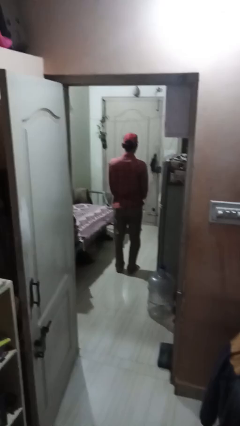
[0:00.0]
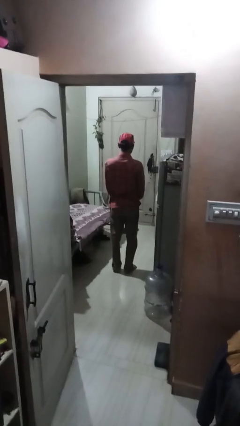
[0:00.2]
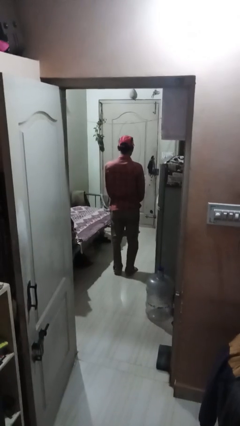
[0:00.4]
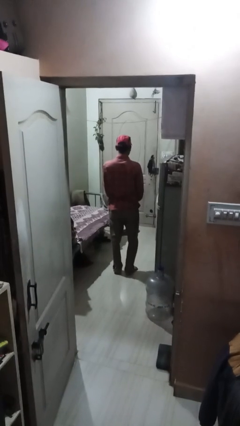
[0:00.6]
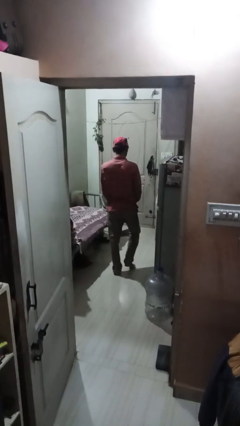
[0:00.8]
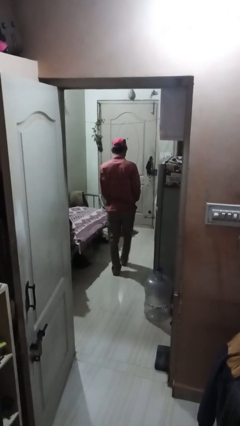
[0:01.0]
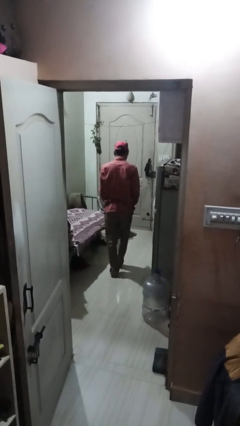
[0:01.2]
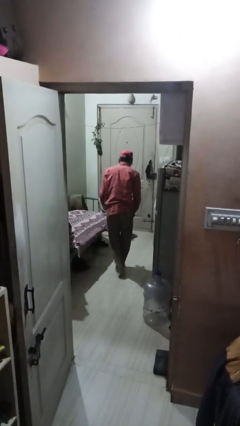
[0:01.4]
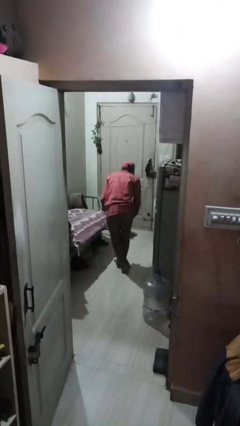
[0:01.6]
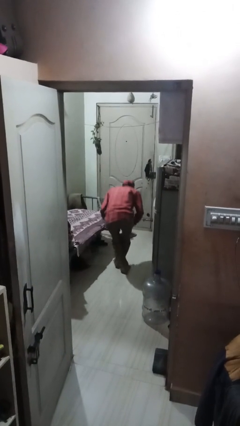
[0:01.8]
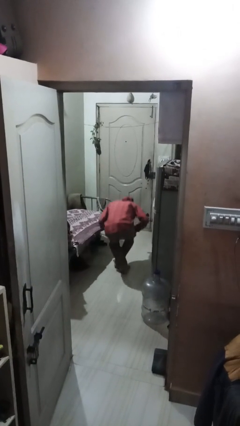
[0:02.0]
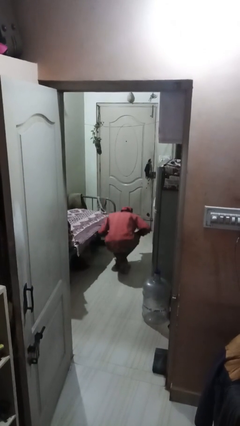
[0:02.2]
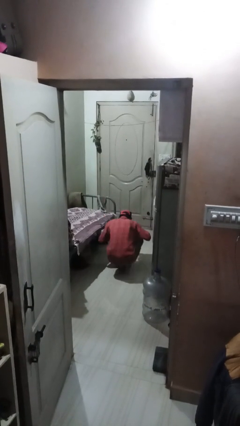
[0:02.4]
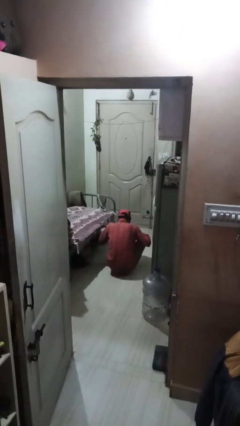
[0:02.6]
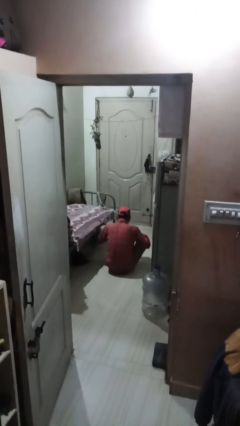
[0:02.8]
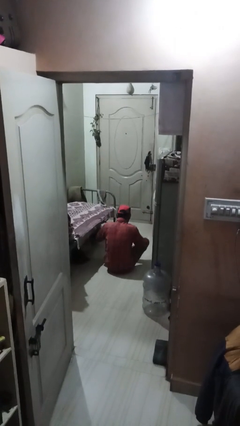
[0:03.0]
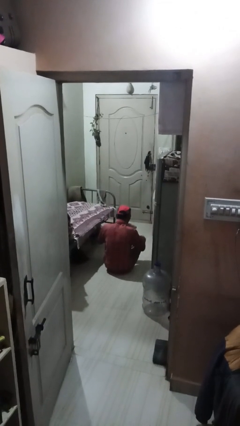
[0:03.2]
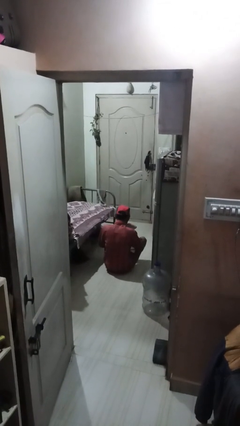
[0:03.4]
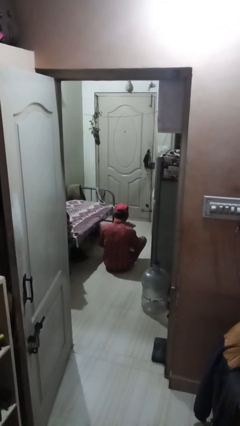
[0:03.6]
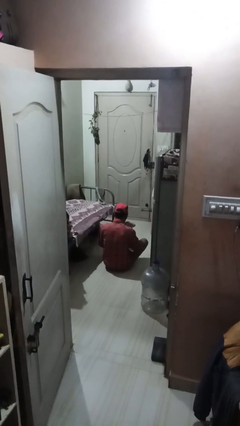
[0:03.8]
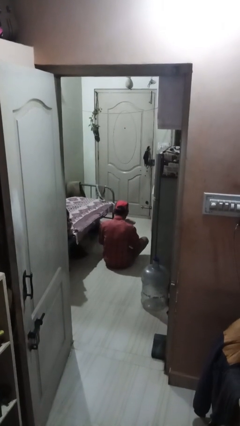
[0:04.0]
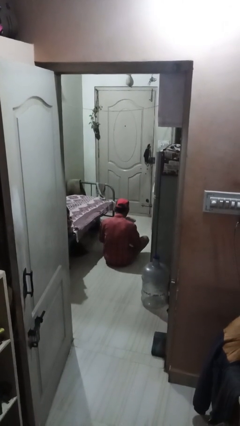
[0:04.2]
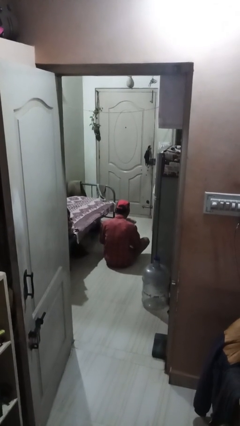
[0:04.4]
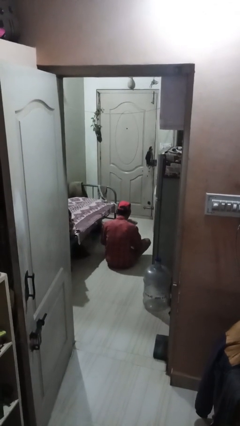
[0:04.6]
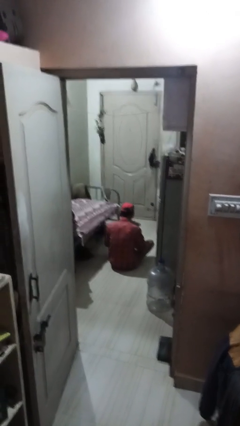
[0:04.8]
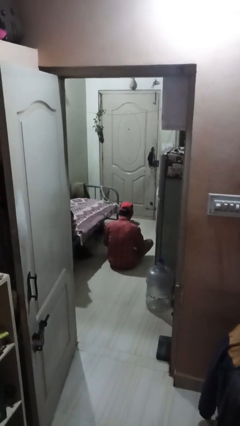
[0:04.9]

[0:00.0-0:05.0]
person sits crisscross

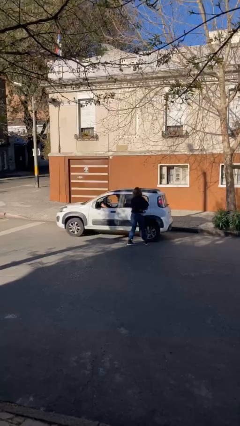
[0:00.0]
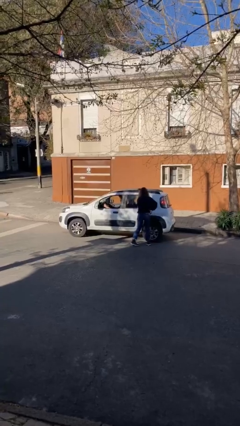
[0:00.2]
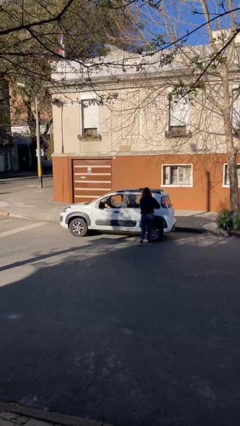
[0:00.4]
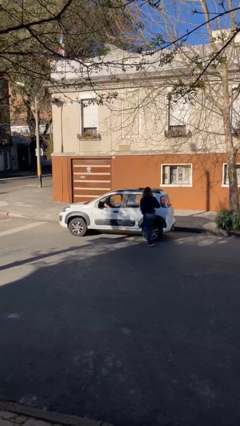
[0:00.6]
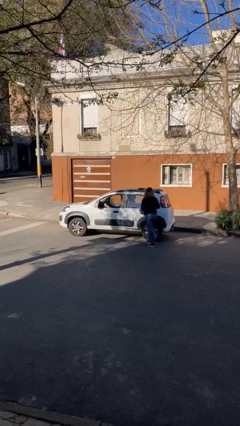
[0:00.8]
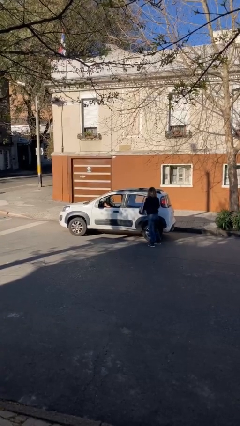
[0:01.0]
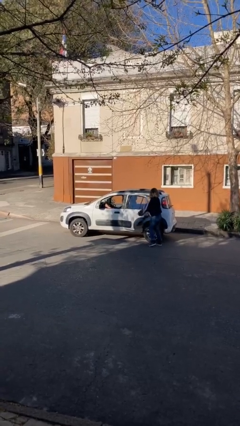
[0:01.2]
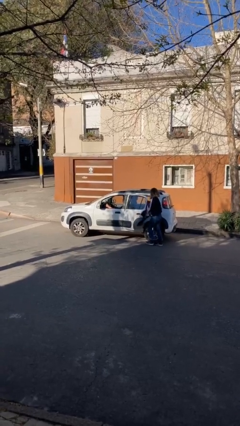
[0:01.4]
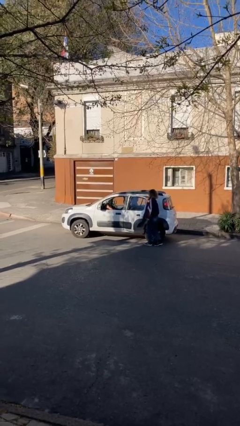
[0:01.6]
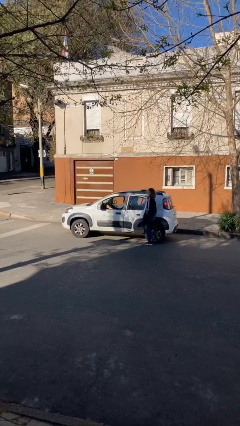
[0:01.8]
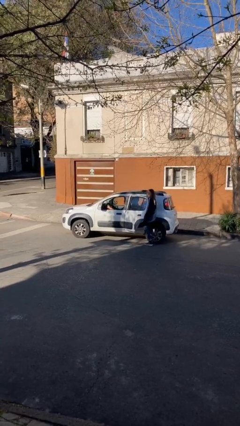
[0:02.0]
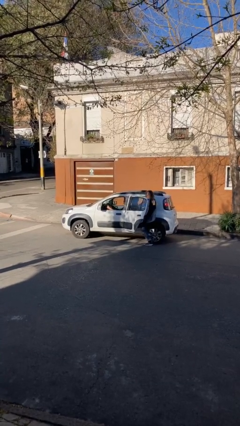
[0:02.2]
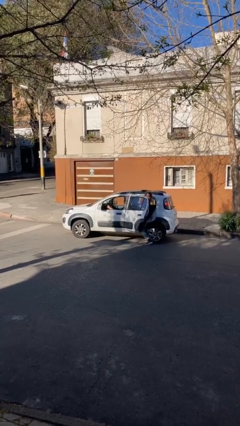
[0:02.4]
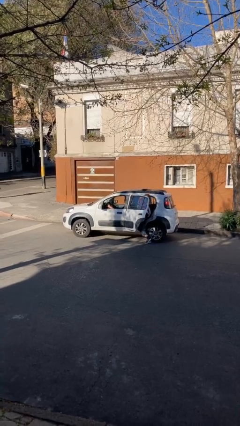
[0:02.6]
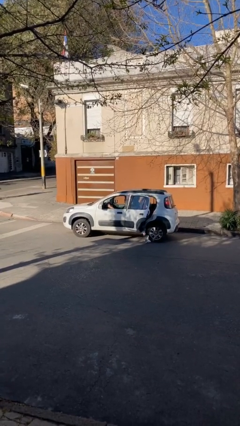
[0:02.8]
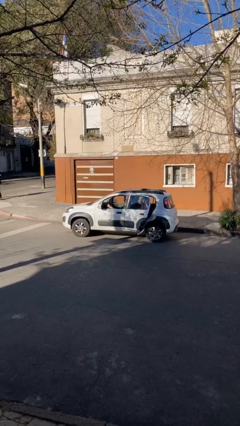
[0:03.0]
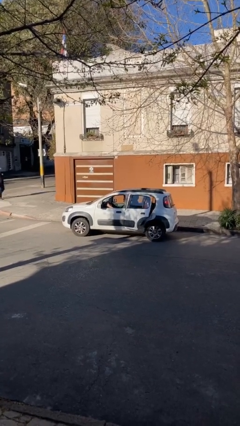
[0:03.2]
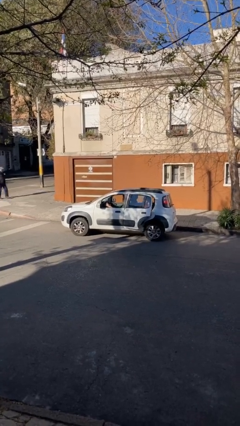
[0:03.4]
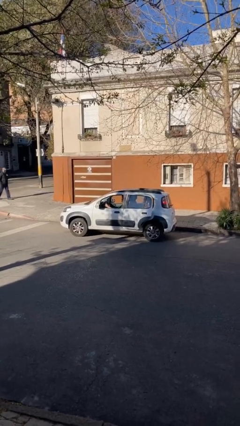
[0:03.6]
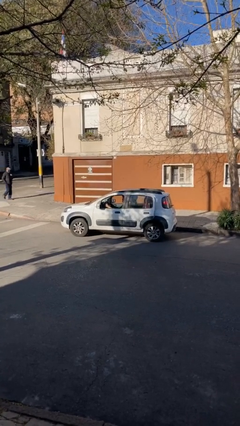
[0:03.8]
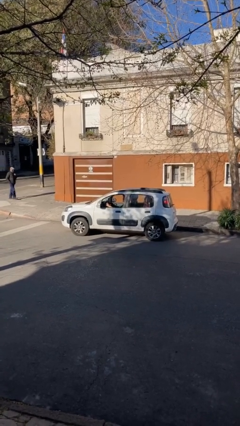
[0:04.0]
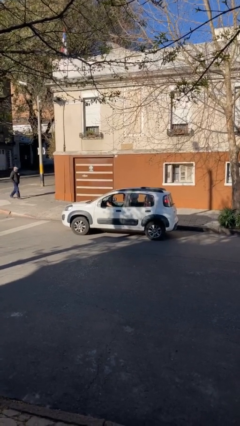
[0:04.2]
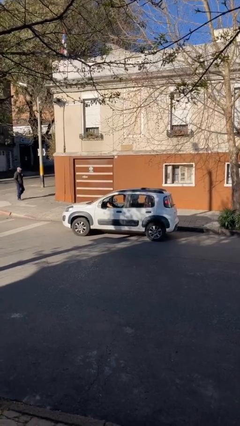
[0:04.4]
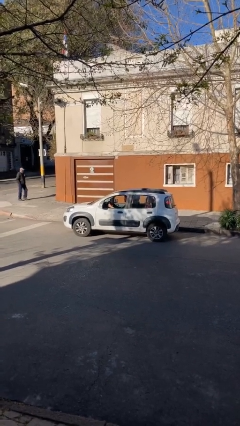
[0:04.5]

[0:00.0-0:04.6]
car picks up person

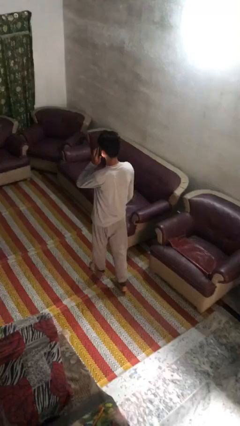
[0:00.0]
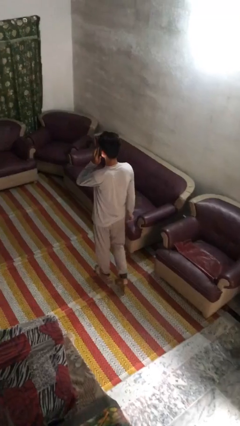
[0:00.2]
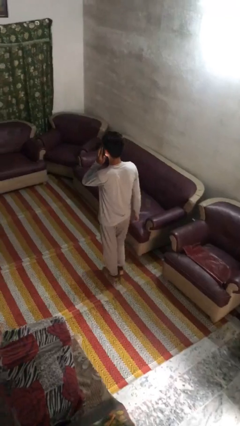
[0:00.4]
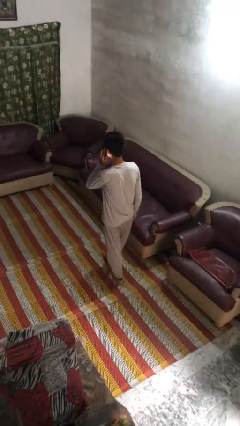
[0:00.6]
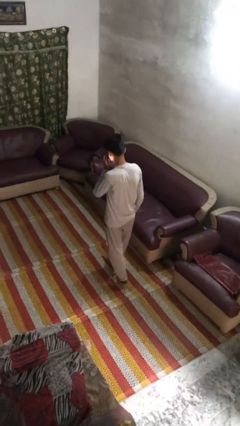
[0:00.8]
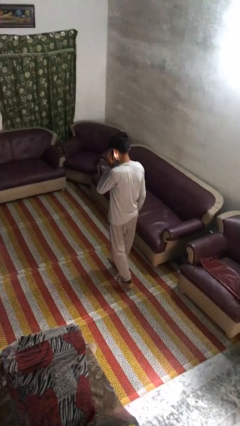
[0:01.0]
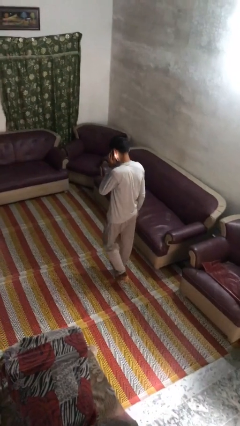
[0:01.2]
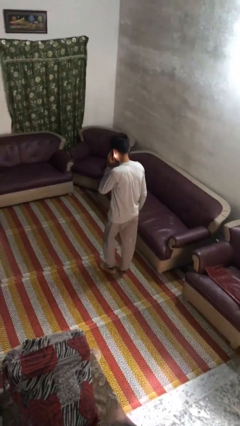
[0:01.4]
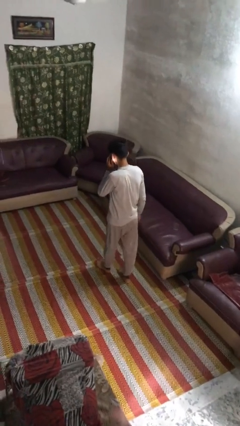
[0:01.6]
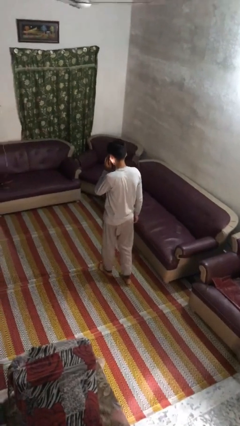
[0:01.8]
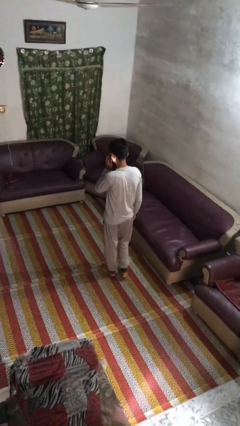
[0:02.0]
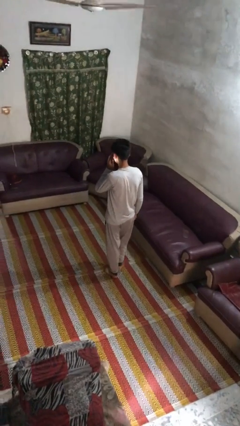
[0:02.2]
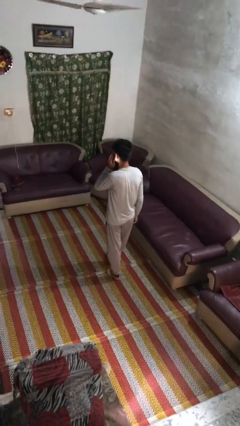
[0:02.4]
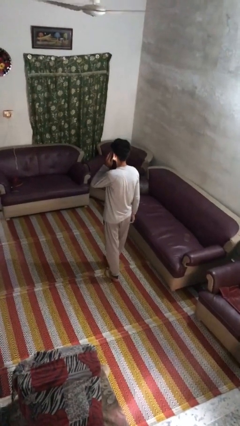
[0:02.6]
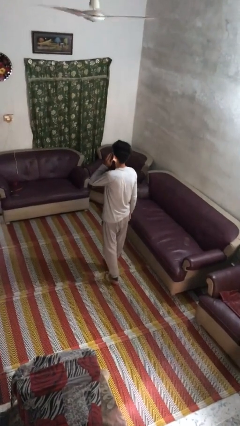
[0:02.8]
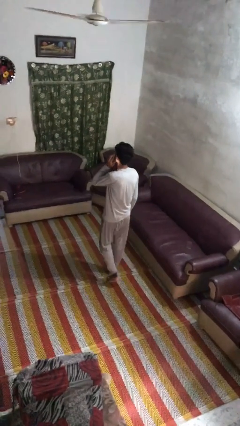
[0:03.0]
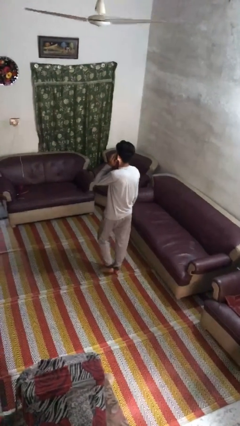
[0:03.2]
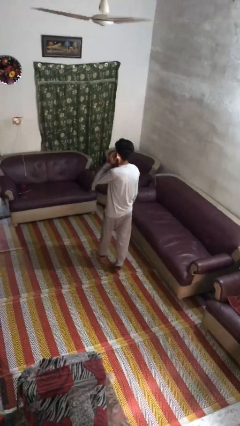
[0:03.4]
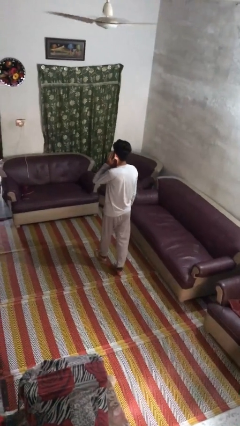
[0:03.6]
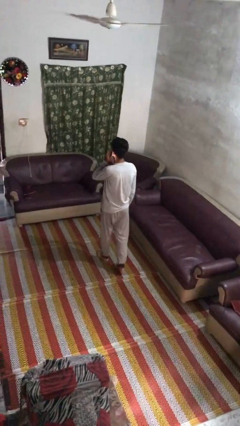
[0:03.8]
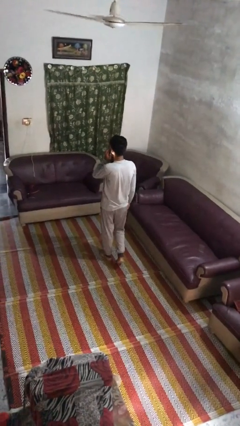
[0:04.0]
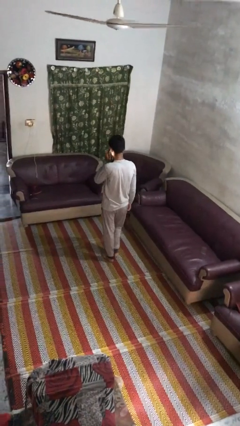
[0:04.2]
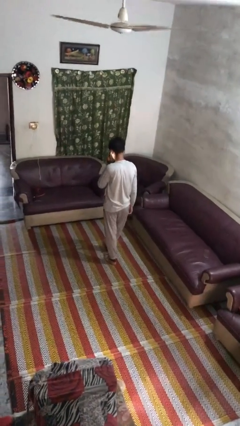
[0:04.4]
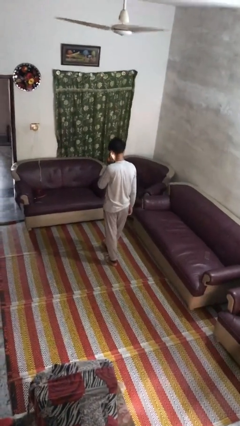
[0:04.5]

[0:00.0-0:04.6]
person talks on phone

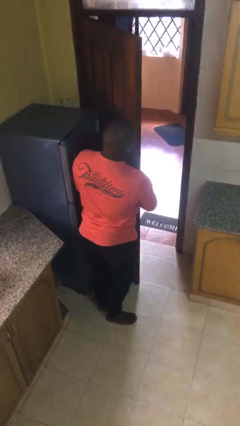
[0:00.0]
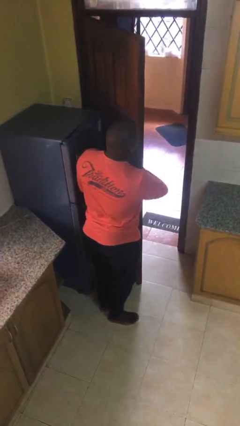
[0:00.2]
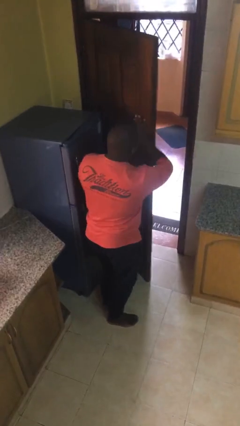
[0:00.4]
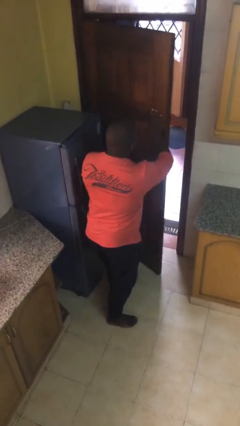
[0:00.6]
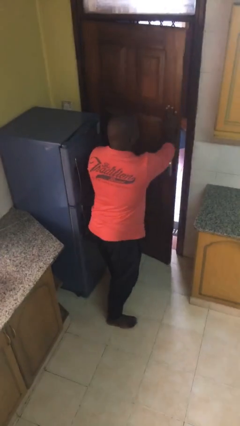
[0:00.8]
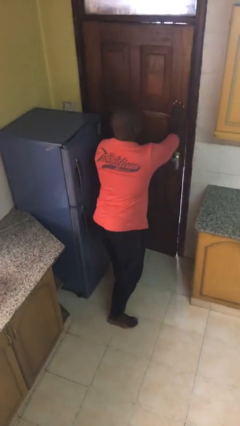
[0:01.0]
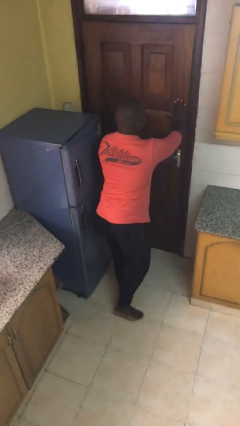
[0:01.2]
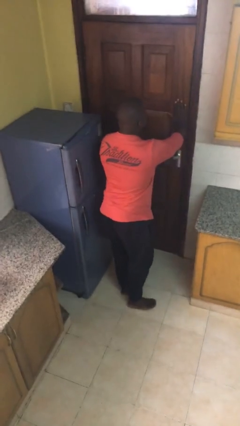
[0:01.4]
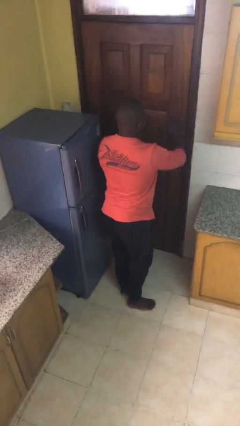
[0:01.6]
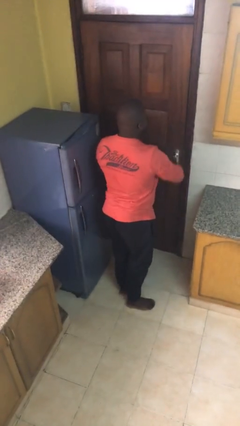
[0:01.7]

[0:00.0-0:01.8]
person closes facility door

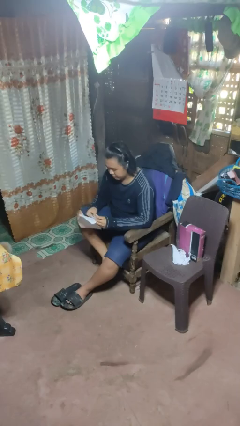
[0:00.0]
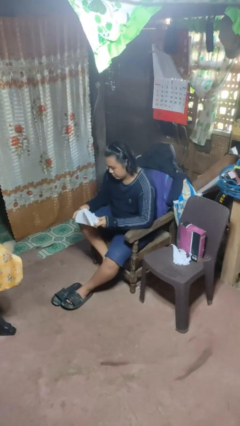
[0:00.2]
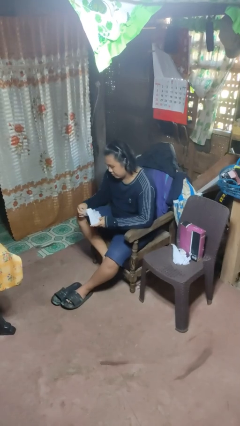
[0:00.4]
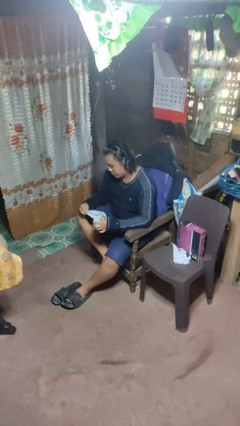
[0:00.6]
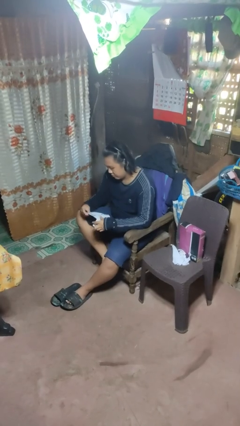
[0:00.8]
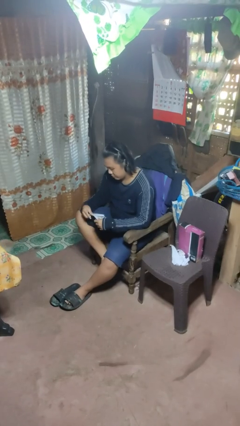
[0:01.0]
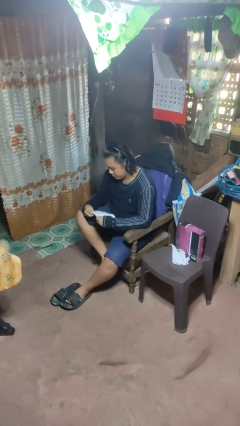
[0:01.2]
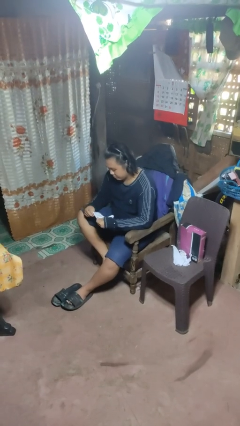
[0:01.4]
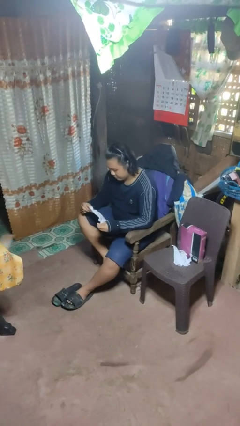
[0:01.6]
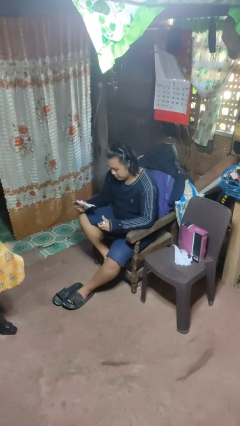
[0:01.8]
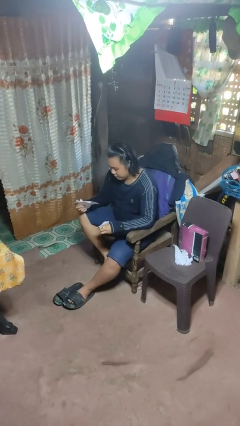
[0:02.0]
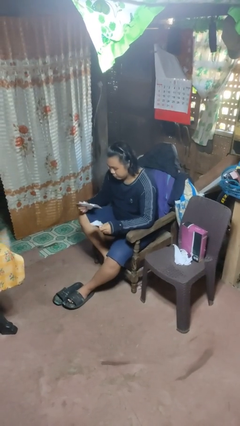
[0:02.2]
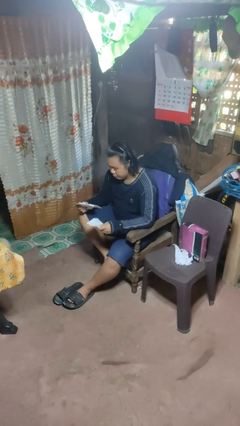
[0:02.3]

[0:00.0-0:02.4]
person tears paper
